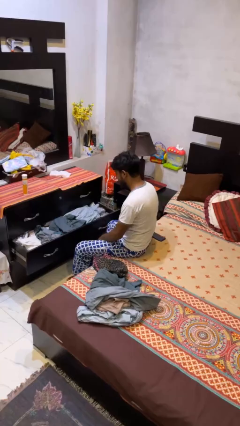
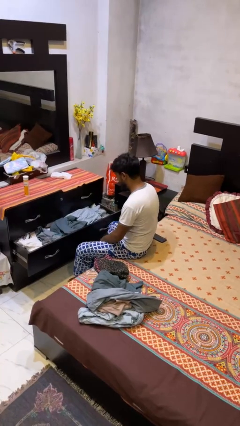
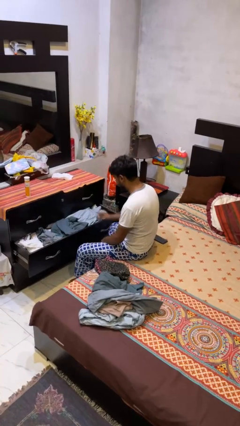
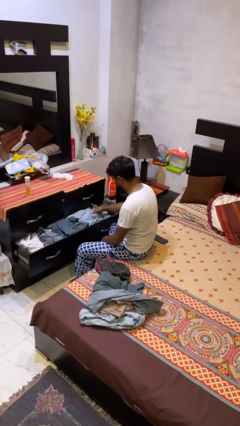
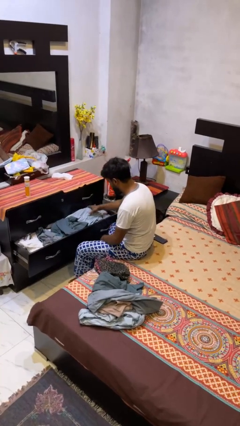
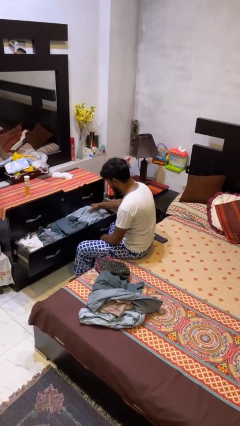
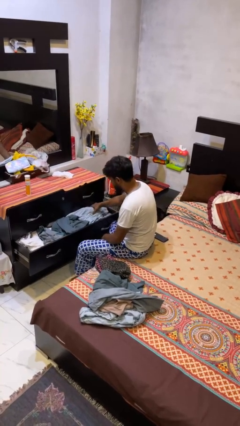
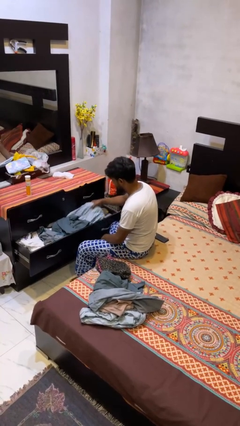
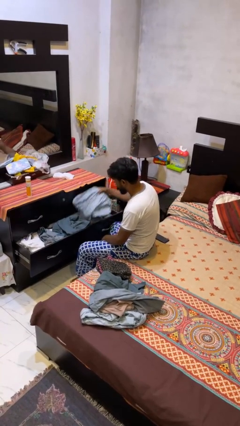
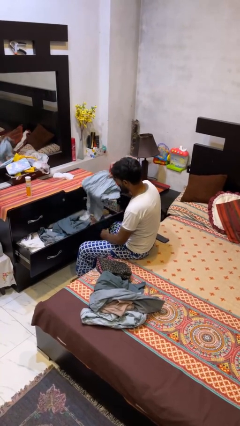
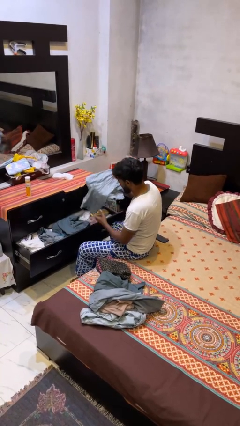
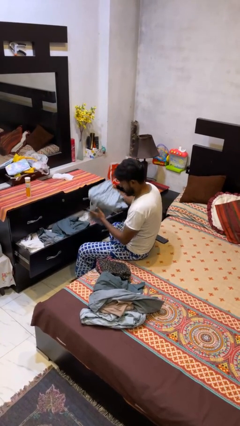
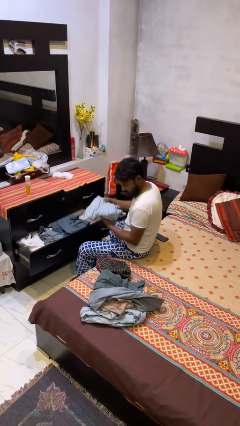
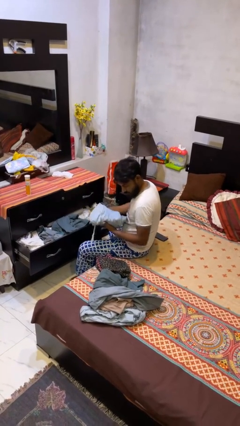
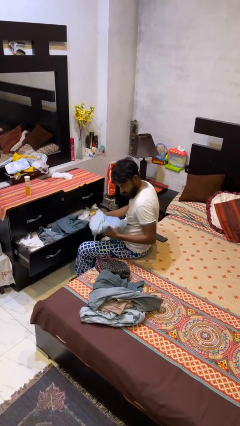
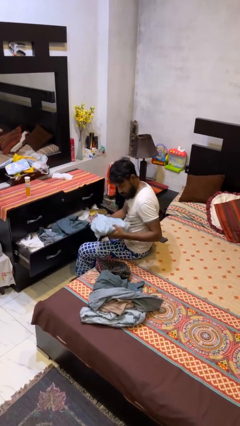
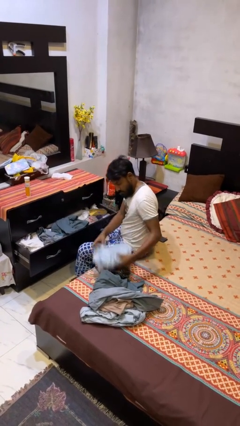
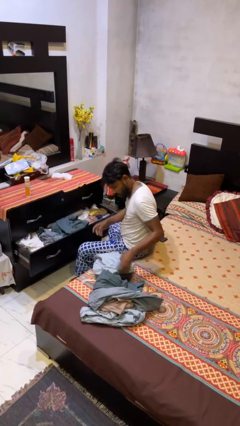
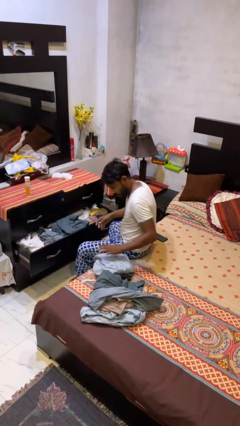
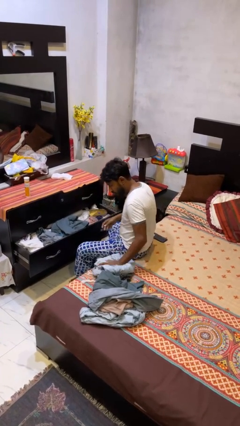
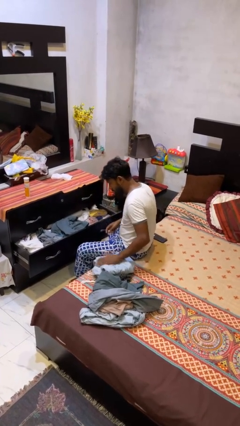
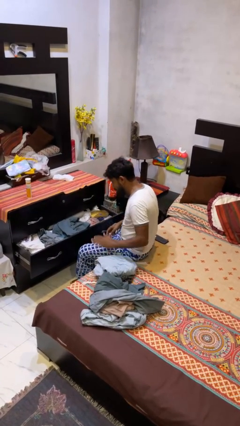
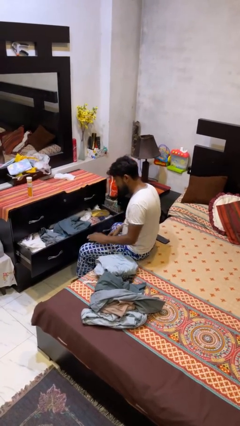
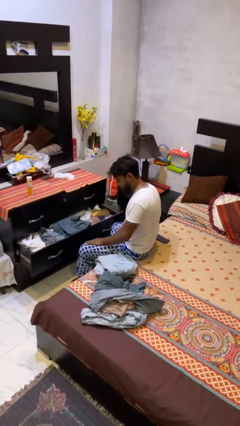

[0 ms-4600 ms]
person takes clothes from dresser

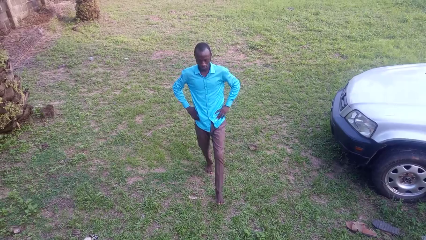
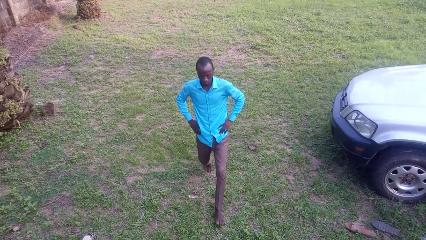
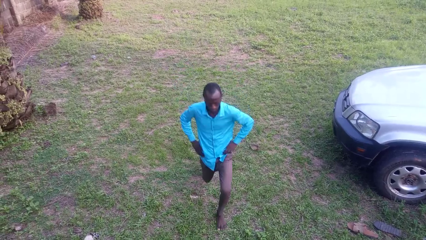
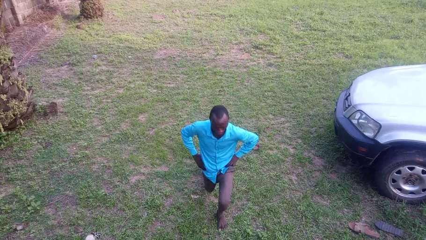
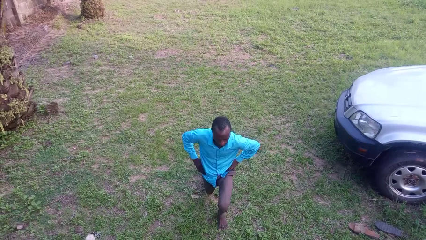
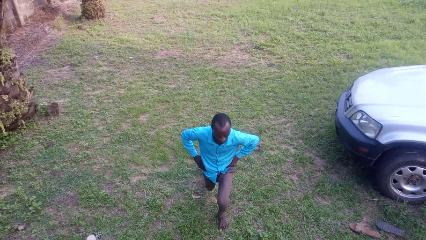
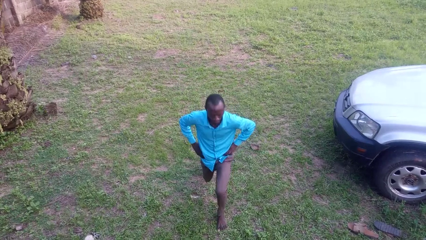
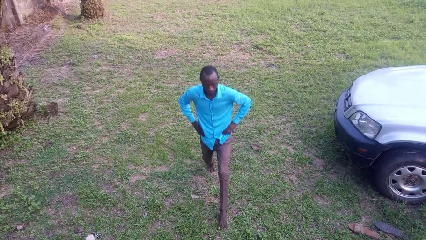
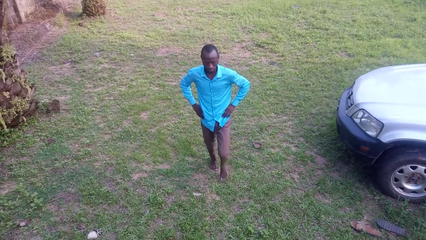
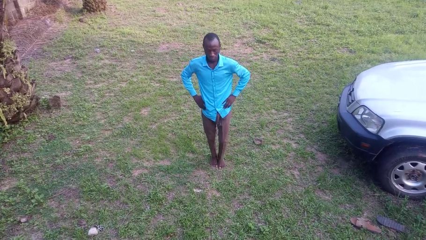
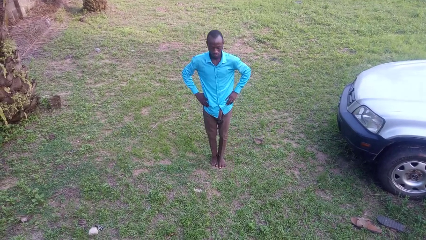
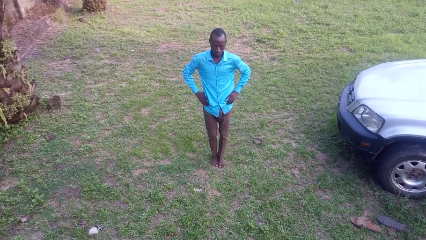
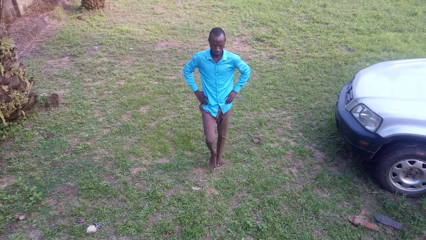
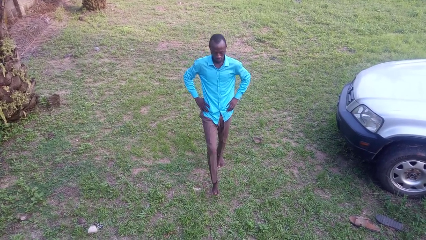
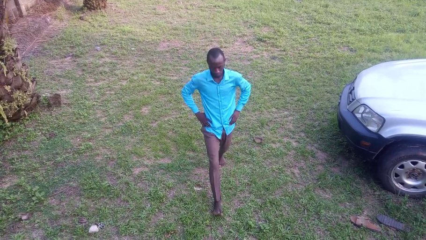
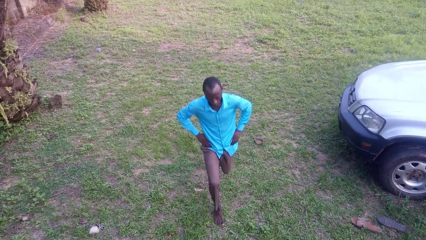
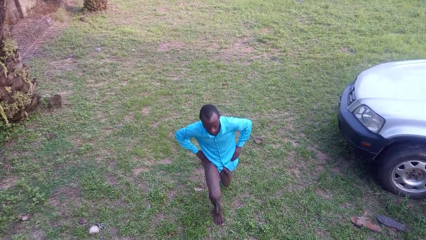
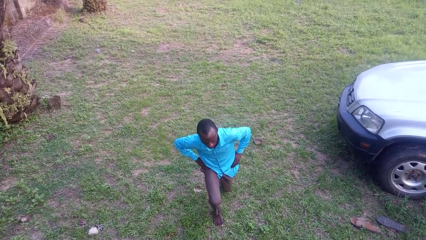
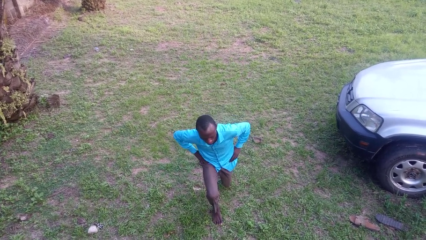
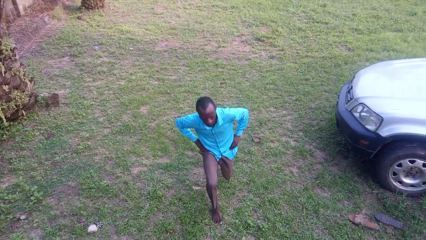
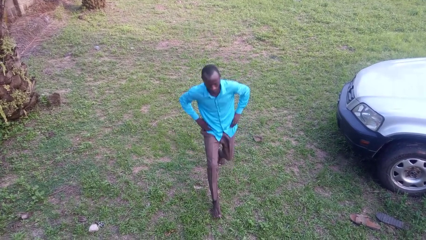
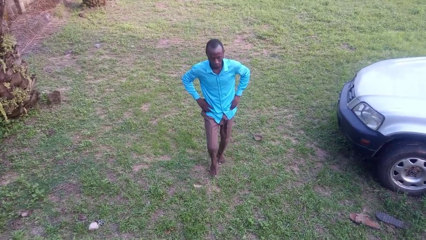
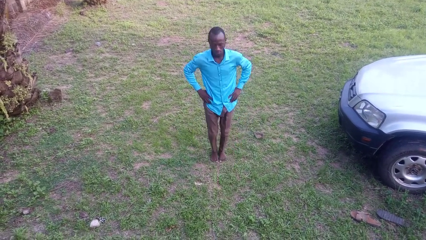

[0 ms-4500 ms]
person exercises with lunges

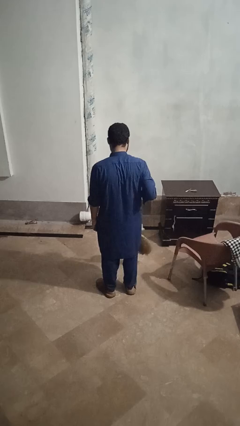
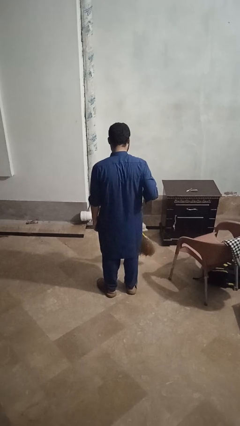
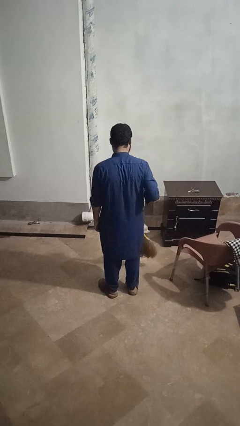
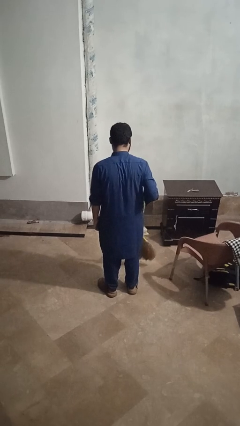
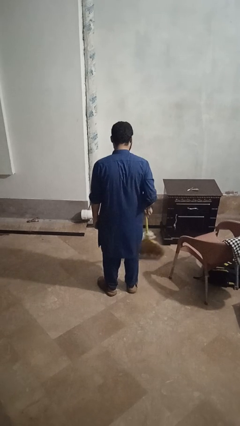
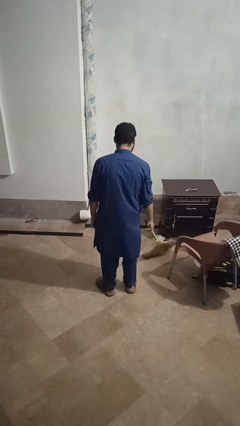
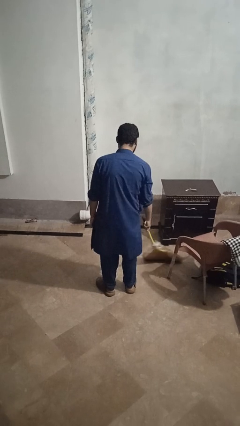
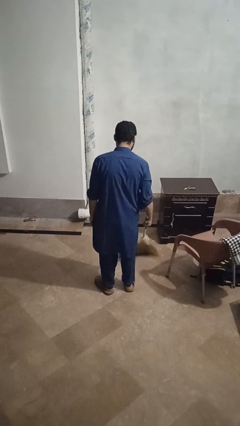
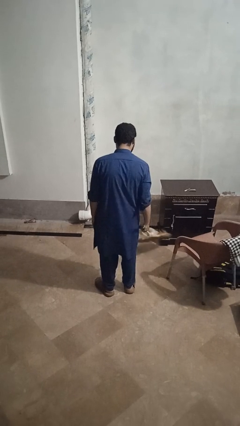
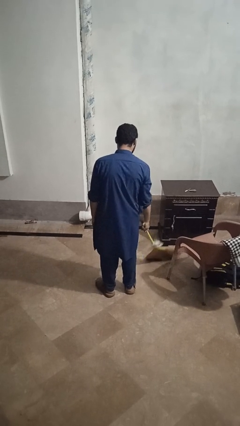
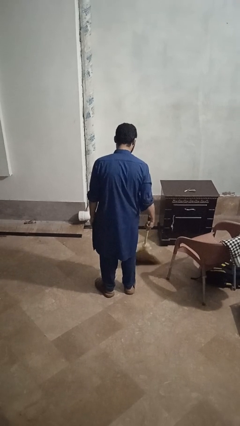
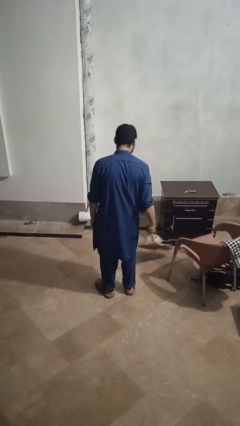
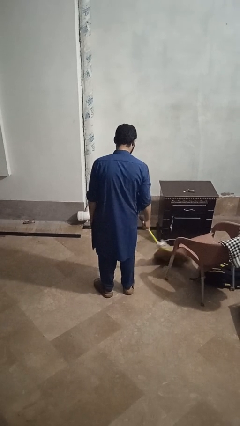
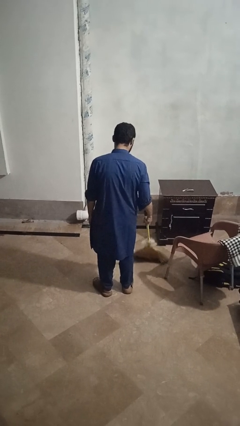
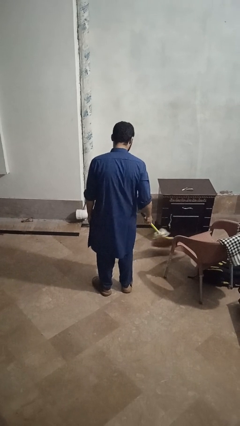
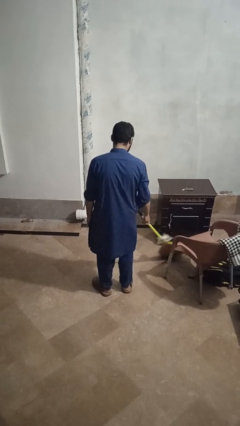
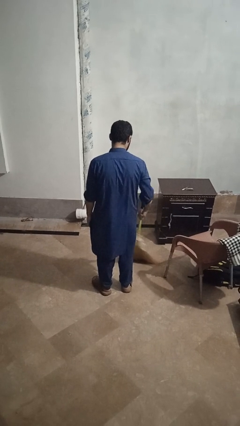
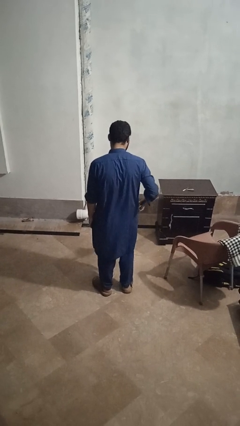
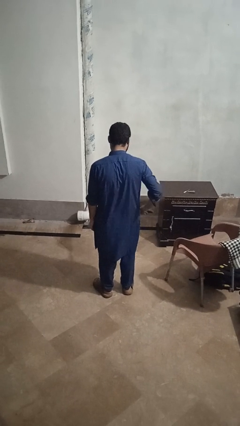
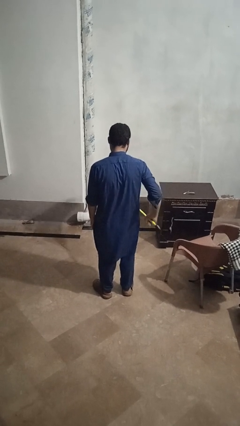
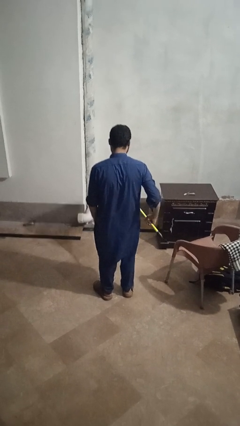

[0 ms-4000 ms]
person mops

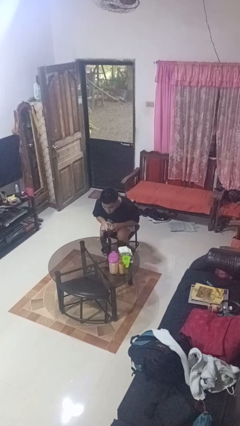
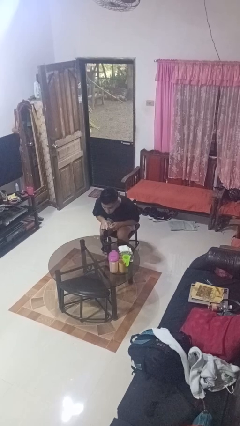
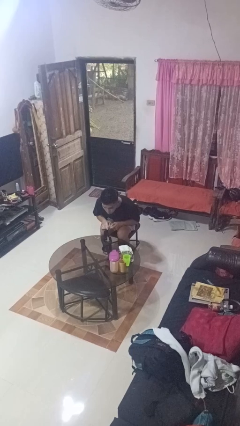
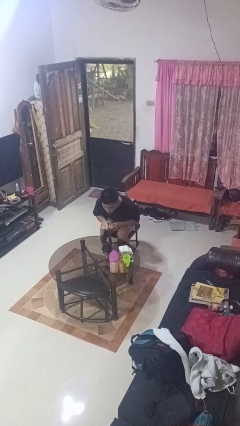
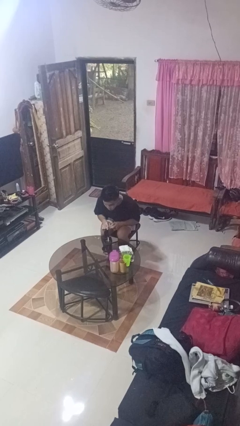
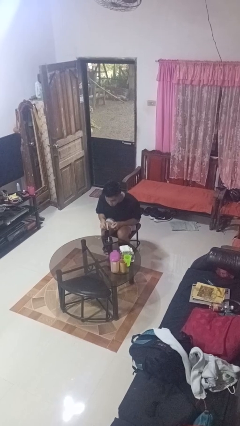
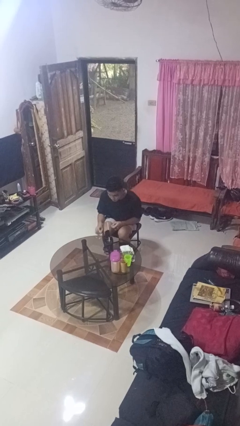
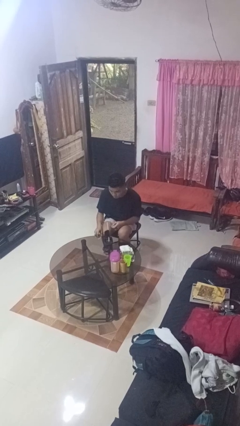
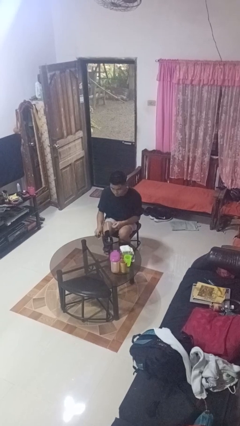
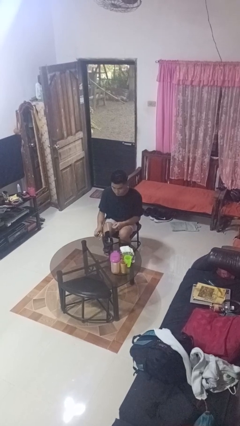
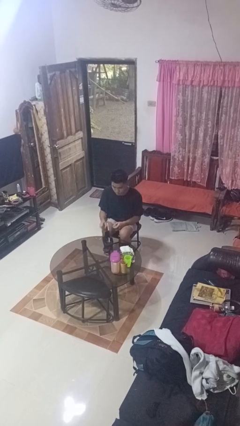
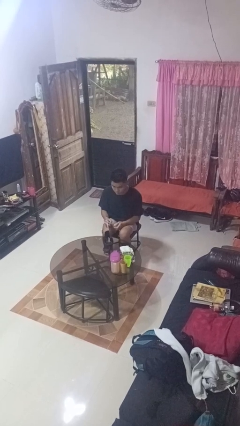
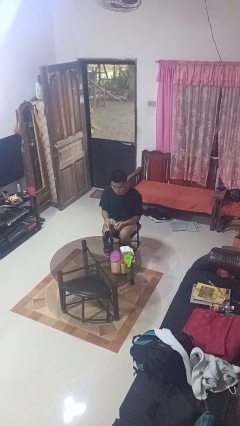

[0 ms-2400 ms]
person extinguishes candle

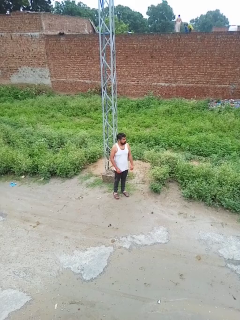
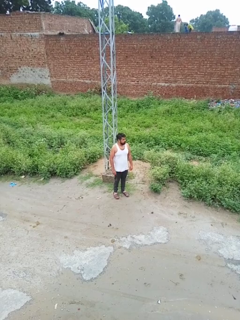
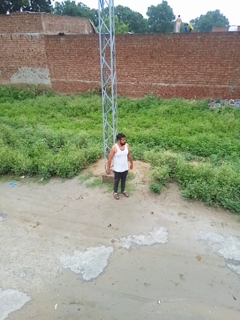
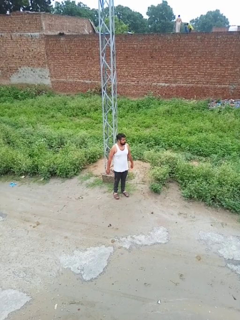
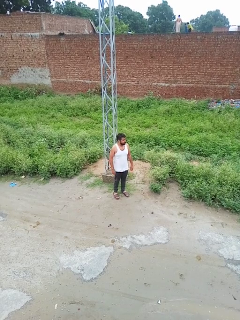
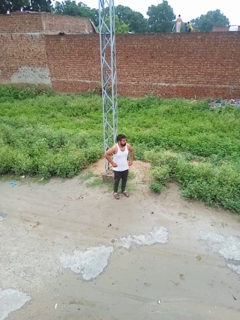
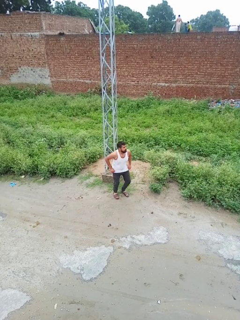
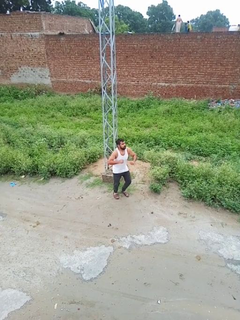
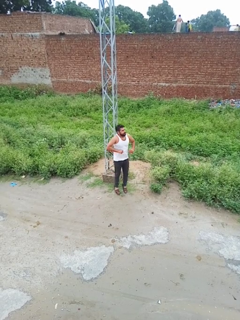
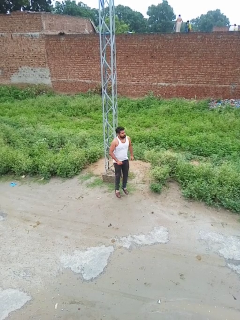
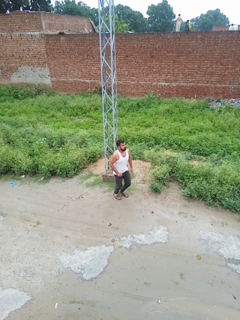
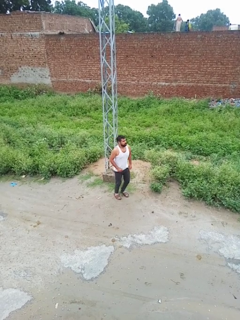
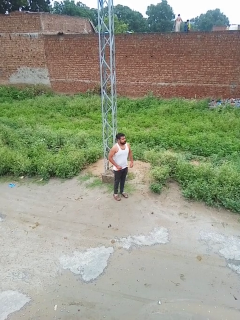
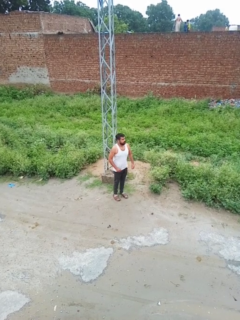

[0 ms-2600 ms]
person jumps
